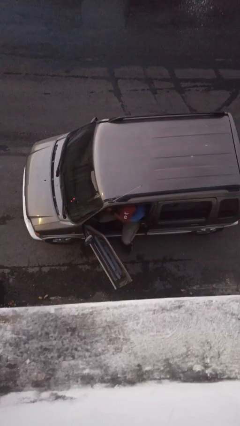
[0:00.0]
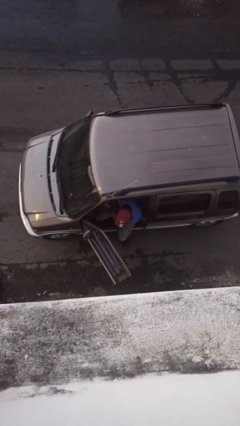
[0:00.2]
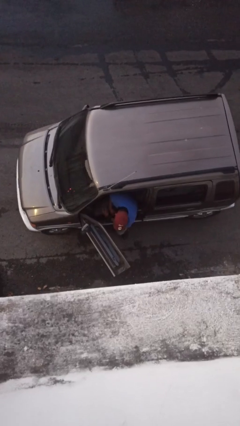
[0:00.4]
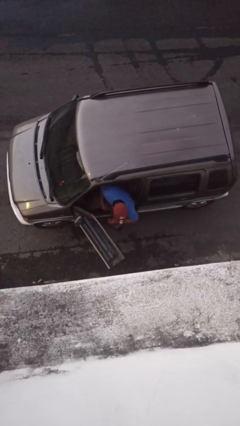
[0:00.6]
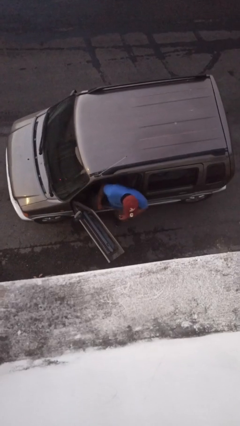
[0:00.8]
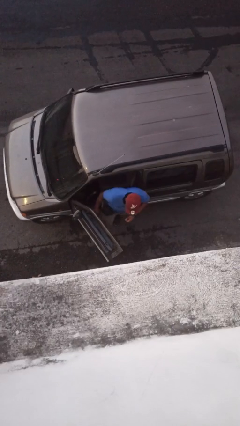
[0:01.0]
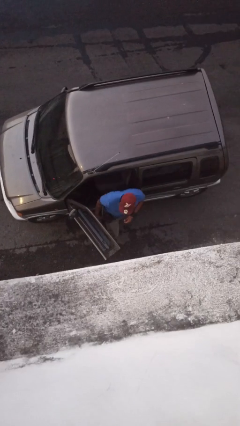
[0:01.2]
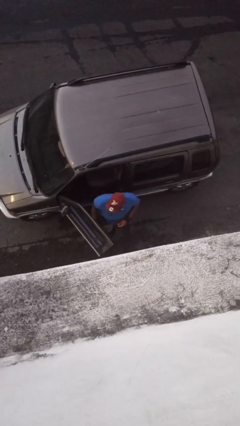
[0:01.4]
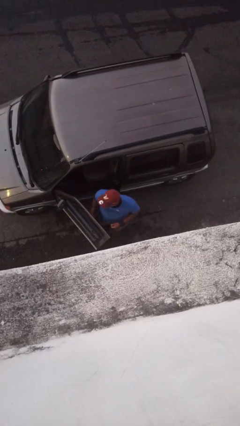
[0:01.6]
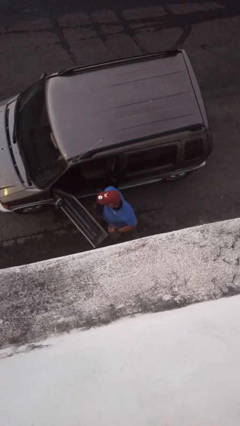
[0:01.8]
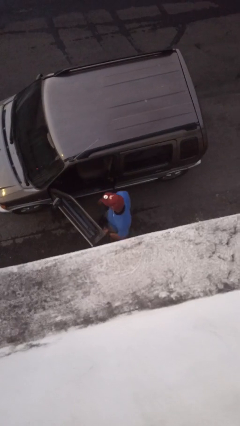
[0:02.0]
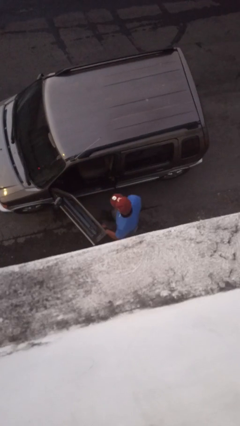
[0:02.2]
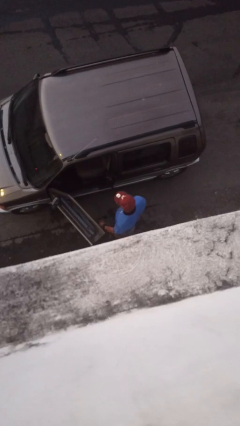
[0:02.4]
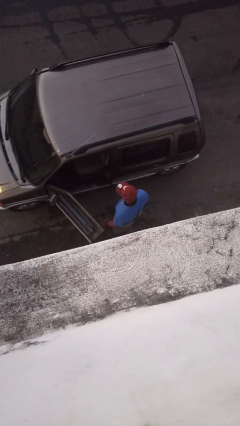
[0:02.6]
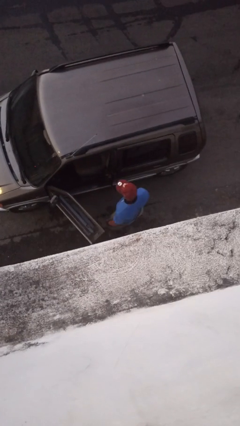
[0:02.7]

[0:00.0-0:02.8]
person exits car

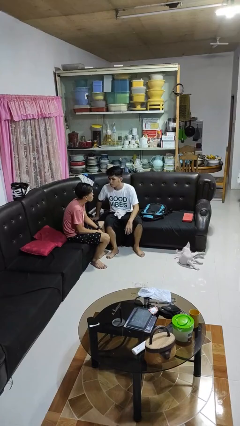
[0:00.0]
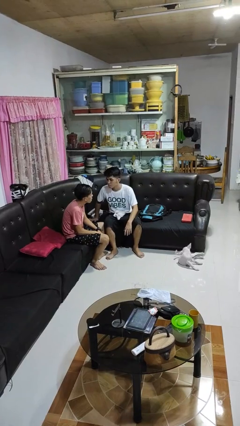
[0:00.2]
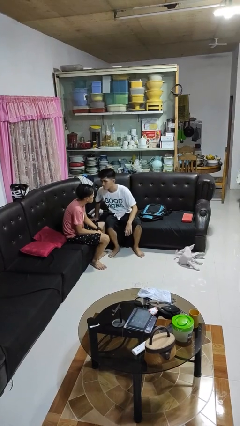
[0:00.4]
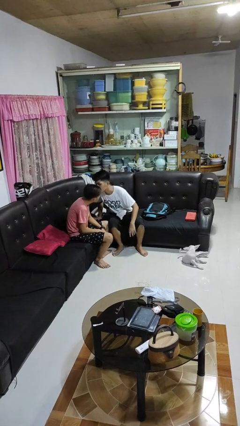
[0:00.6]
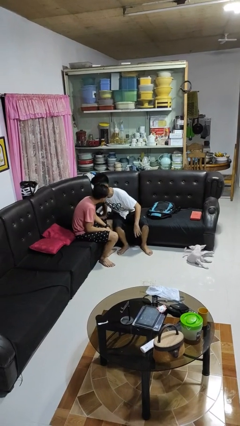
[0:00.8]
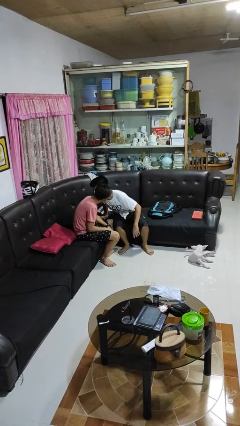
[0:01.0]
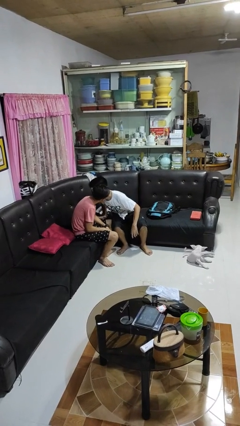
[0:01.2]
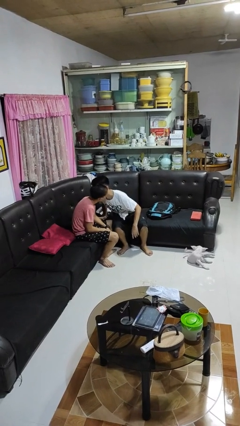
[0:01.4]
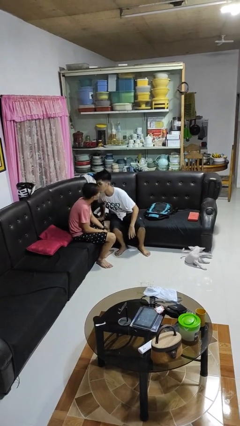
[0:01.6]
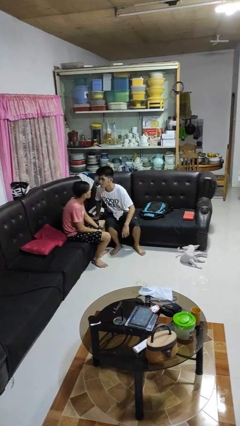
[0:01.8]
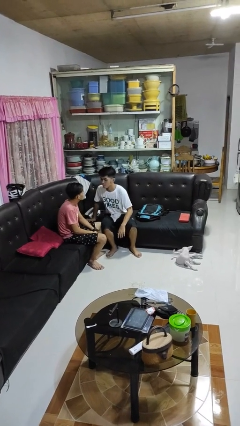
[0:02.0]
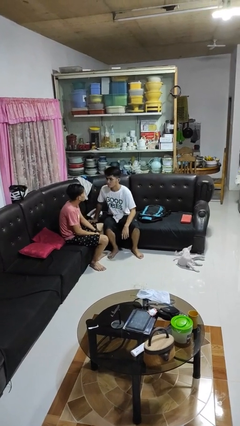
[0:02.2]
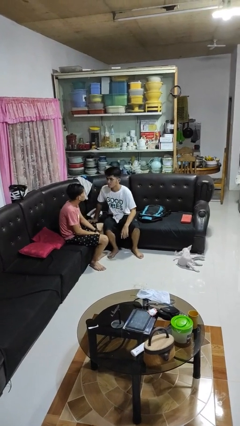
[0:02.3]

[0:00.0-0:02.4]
person kisses cheek of person

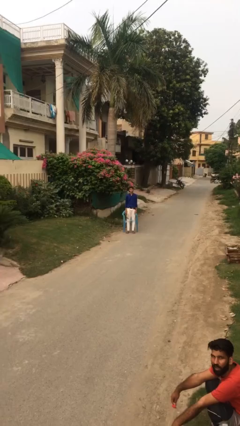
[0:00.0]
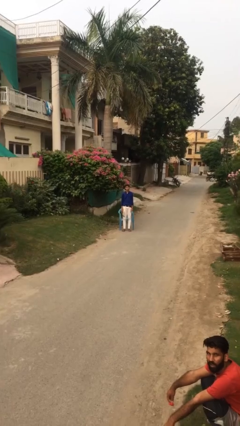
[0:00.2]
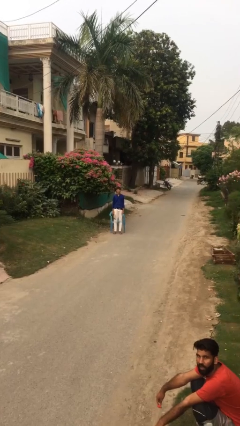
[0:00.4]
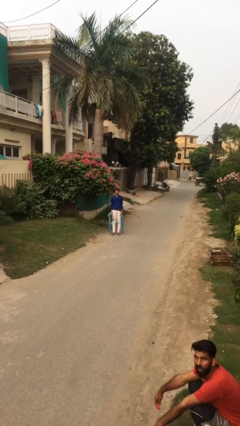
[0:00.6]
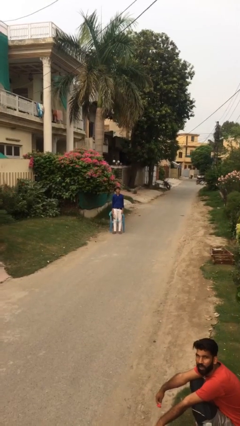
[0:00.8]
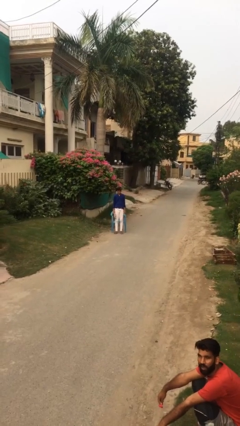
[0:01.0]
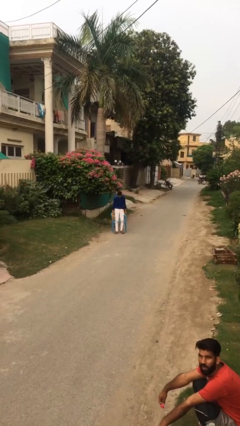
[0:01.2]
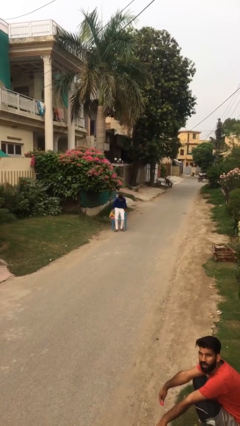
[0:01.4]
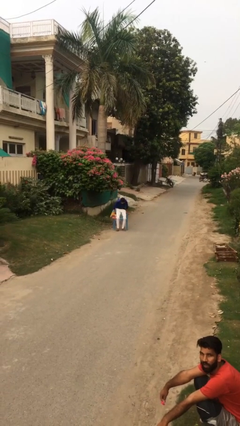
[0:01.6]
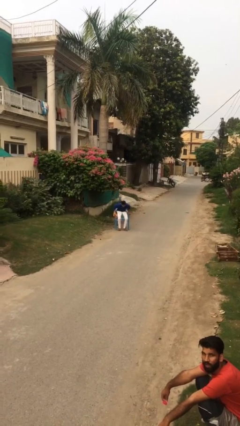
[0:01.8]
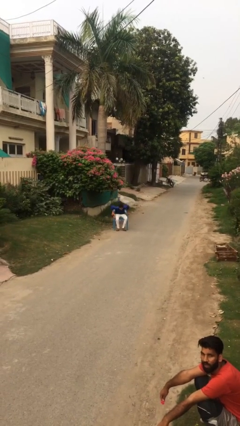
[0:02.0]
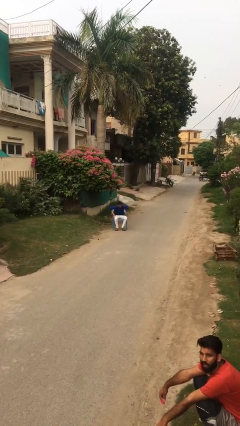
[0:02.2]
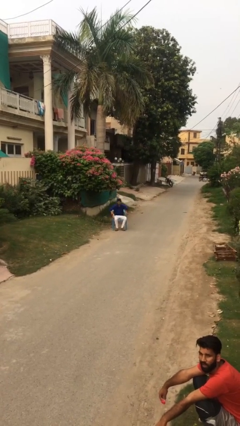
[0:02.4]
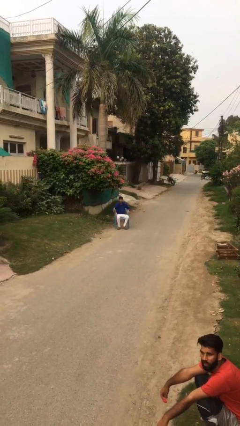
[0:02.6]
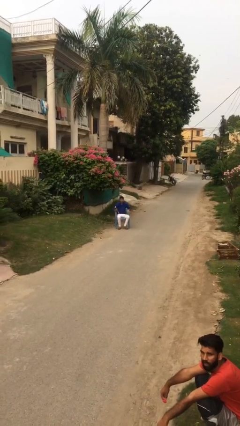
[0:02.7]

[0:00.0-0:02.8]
person sits down

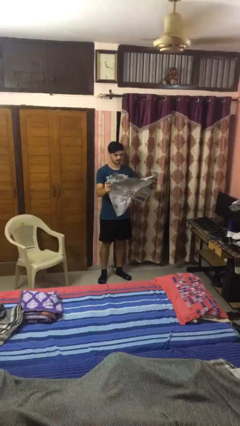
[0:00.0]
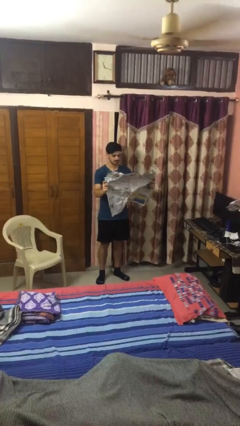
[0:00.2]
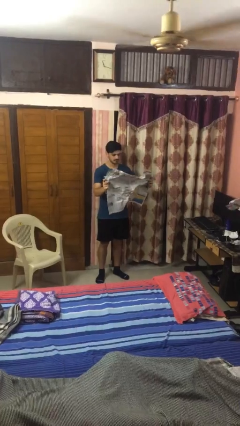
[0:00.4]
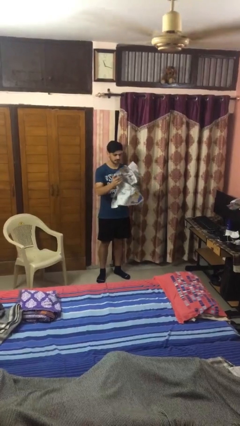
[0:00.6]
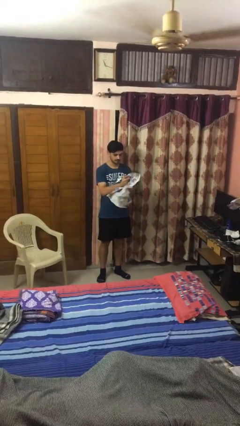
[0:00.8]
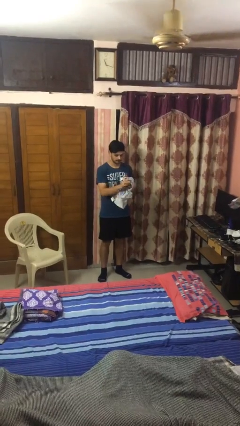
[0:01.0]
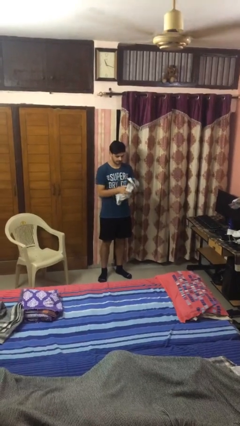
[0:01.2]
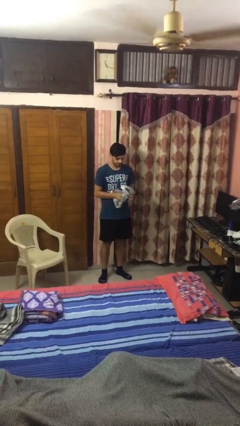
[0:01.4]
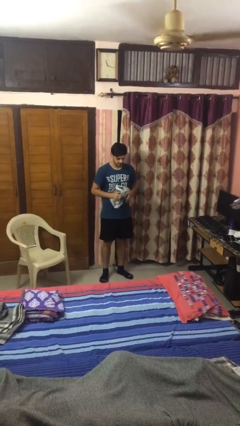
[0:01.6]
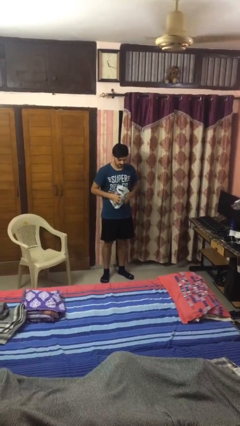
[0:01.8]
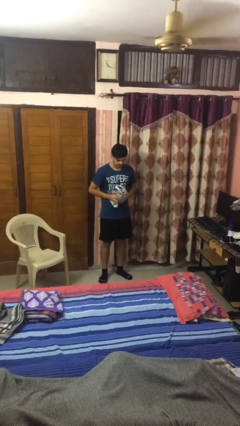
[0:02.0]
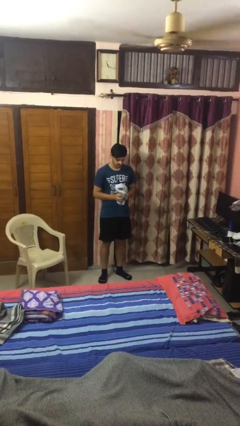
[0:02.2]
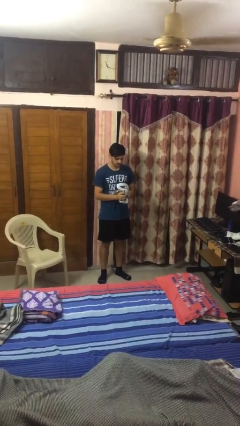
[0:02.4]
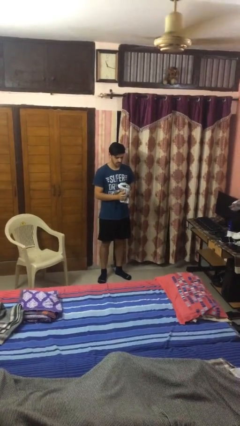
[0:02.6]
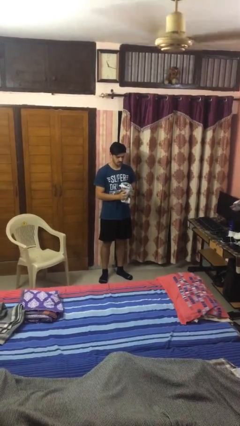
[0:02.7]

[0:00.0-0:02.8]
person crumples paper

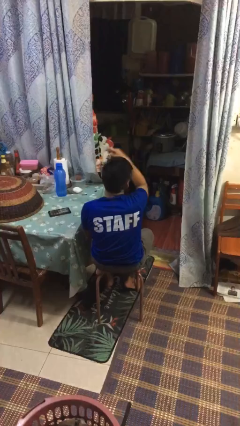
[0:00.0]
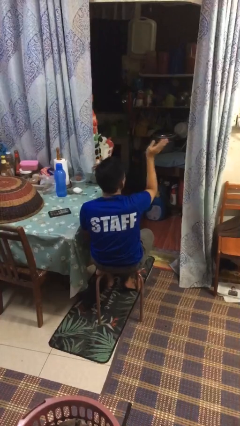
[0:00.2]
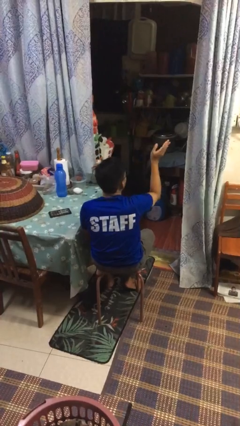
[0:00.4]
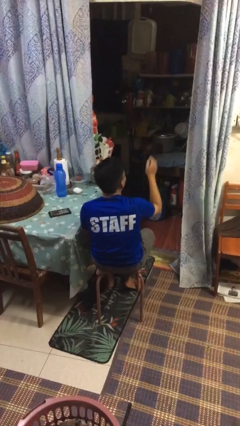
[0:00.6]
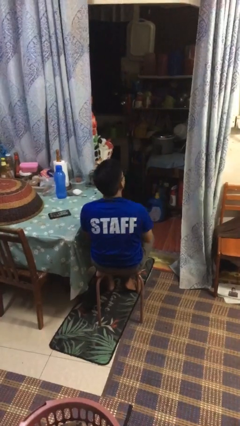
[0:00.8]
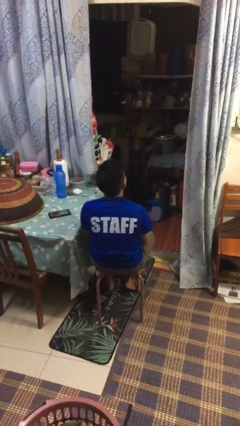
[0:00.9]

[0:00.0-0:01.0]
person gestures swipe right

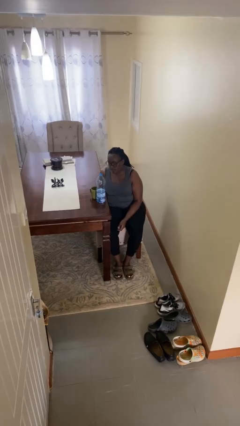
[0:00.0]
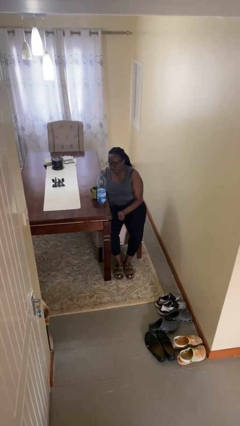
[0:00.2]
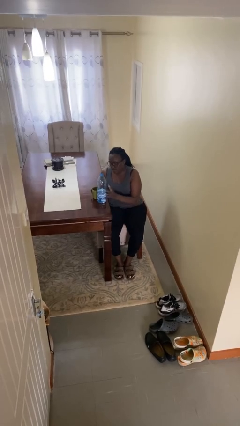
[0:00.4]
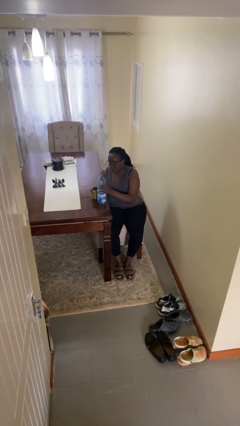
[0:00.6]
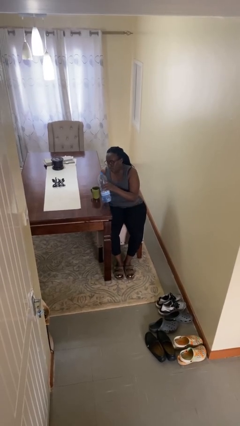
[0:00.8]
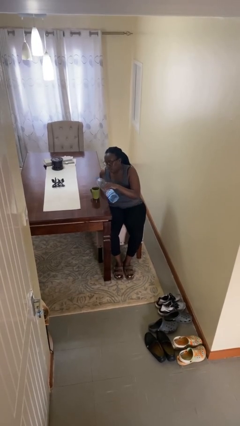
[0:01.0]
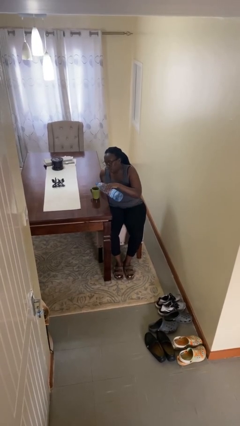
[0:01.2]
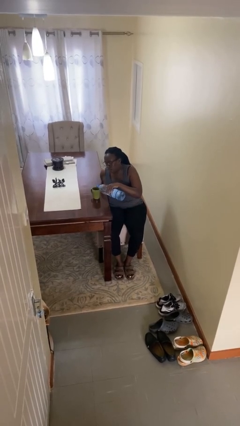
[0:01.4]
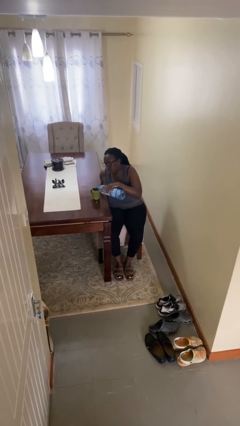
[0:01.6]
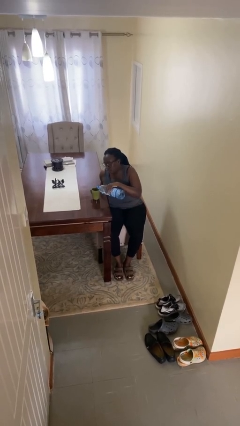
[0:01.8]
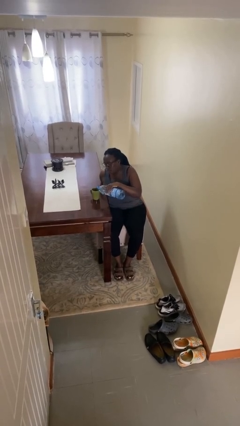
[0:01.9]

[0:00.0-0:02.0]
person pours liquid into cup

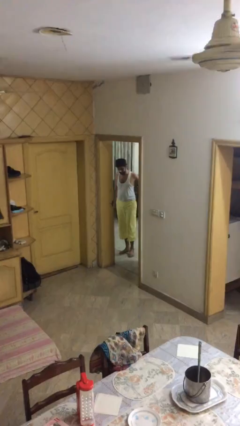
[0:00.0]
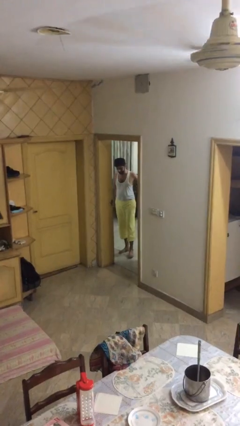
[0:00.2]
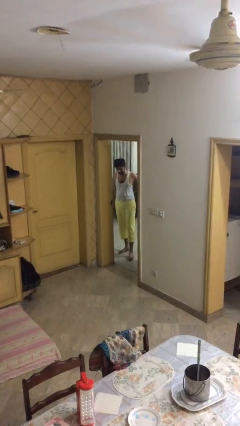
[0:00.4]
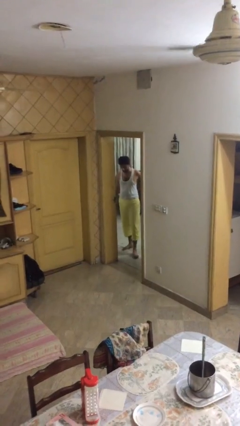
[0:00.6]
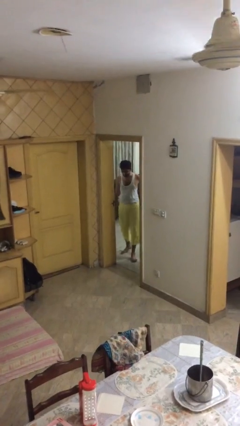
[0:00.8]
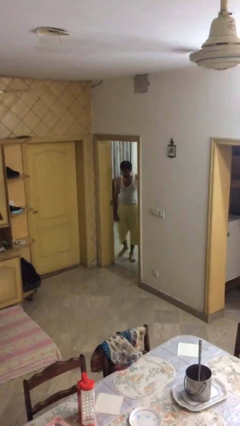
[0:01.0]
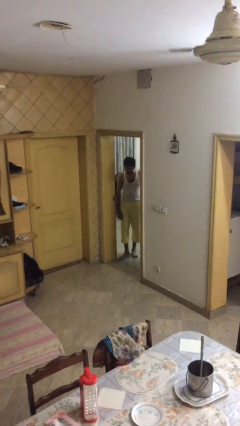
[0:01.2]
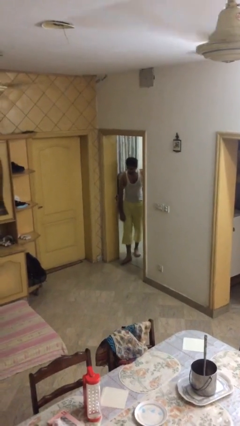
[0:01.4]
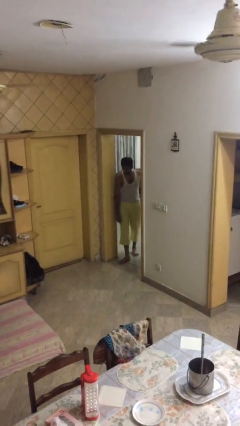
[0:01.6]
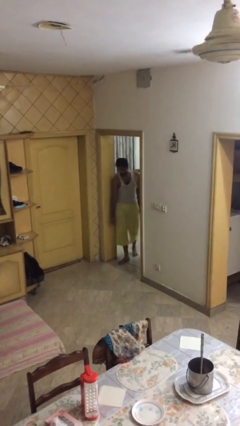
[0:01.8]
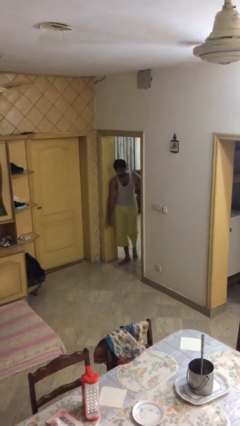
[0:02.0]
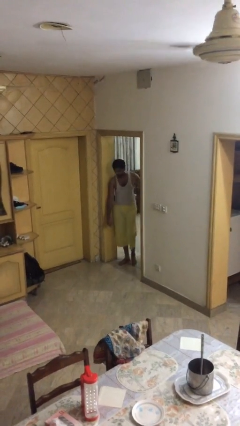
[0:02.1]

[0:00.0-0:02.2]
person enters scene through structure

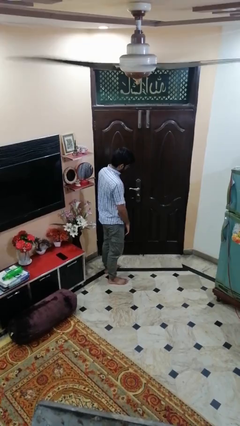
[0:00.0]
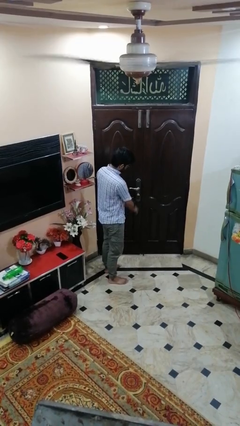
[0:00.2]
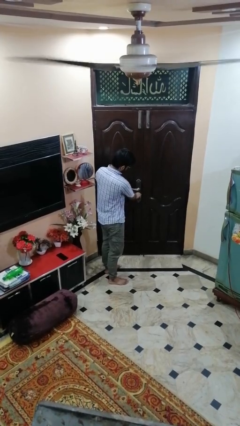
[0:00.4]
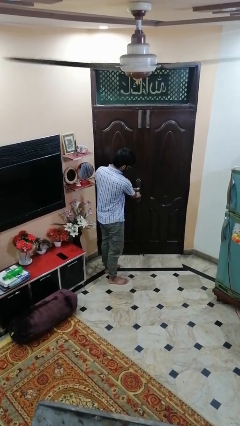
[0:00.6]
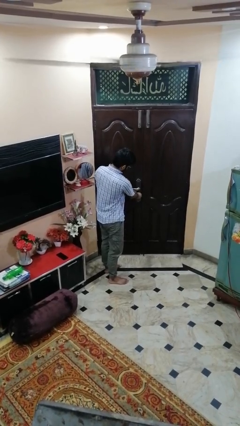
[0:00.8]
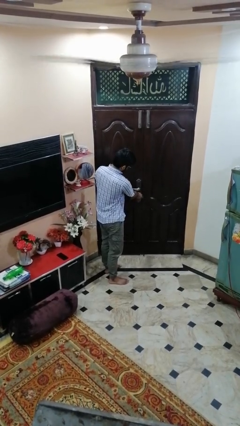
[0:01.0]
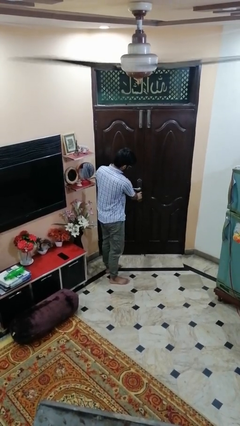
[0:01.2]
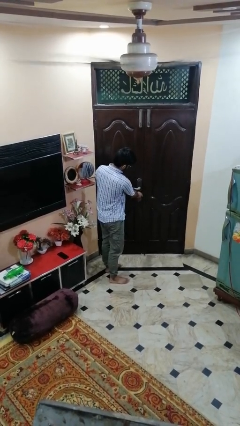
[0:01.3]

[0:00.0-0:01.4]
person locks door with keys
